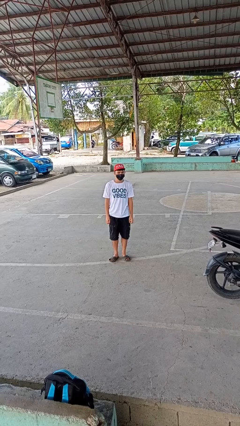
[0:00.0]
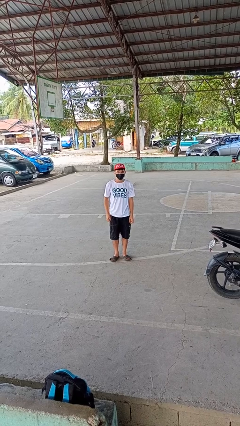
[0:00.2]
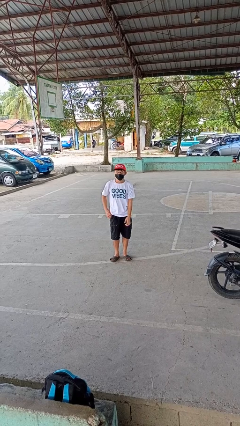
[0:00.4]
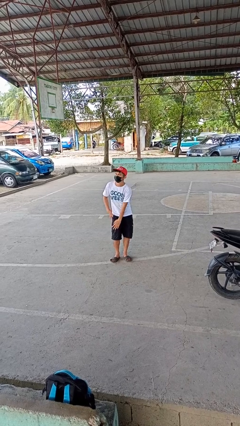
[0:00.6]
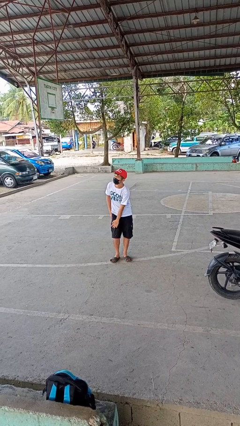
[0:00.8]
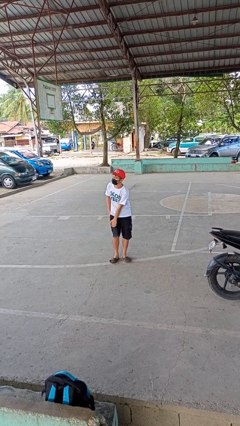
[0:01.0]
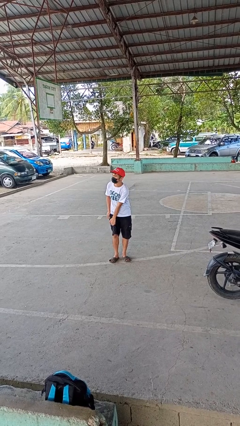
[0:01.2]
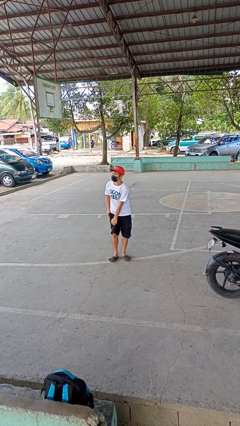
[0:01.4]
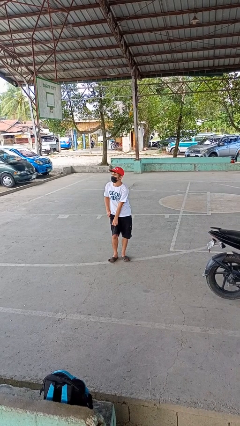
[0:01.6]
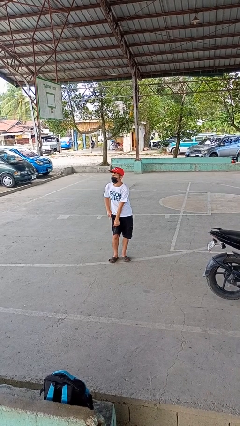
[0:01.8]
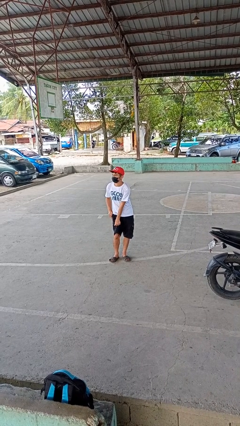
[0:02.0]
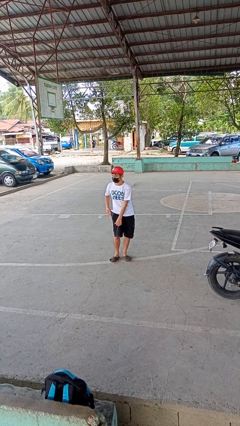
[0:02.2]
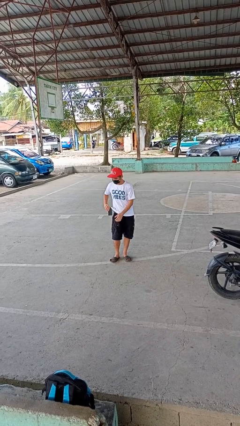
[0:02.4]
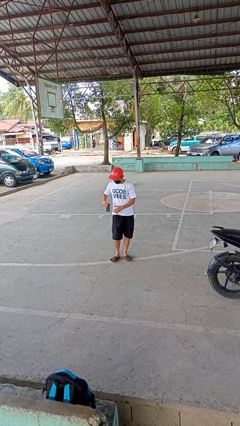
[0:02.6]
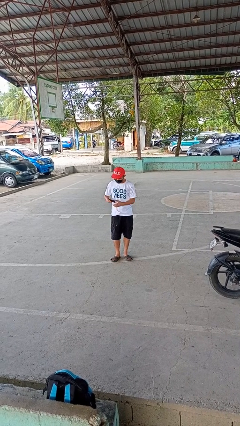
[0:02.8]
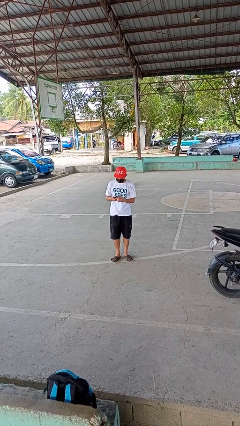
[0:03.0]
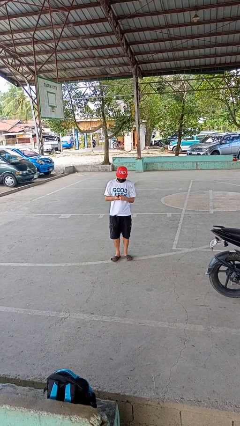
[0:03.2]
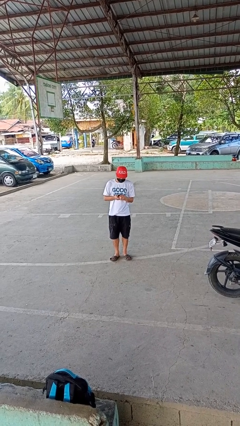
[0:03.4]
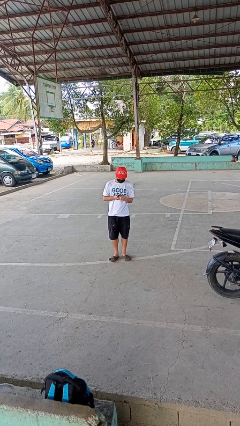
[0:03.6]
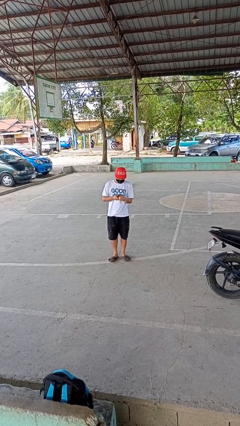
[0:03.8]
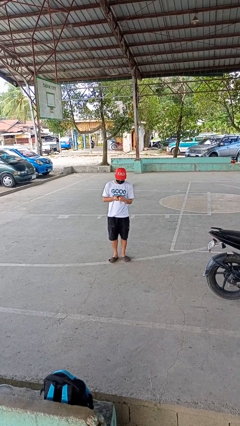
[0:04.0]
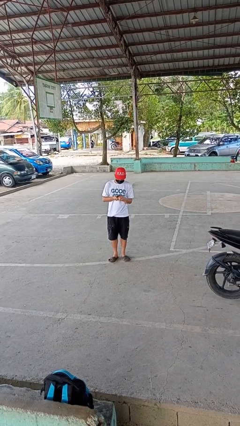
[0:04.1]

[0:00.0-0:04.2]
person takes phone from pocket

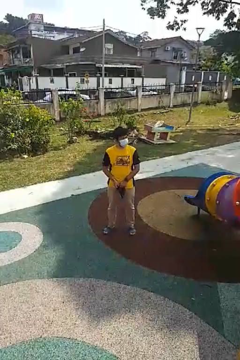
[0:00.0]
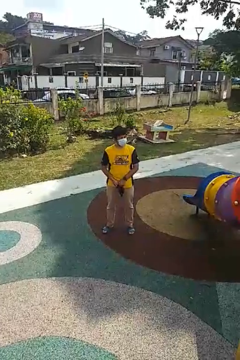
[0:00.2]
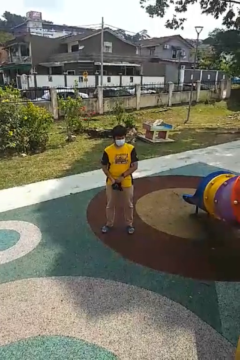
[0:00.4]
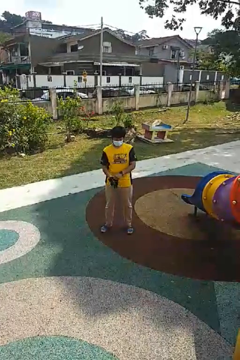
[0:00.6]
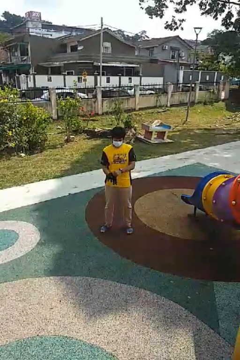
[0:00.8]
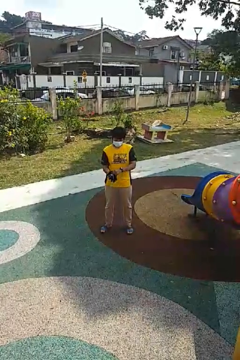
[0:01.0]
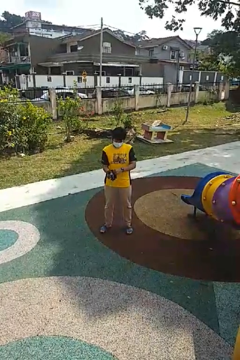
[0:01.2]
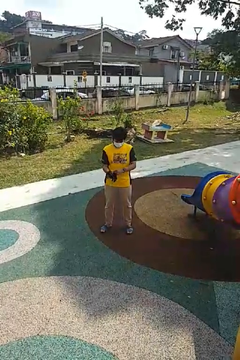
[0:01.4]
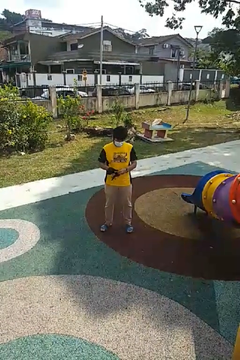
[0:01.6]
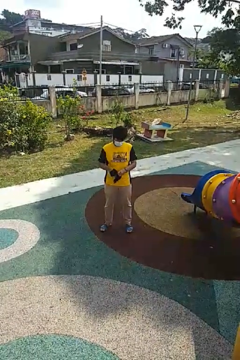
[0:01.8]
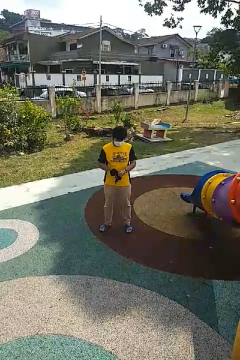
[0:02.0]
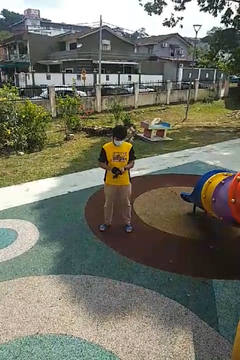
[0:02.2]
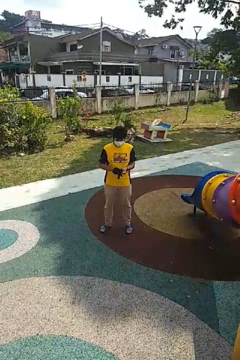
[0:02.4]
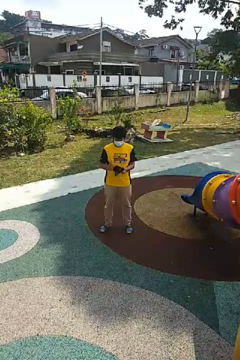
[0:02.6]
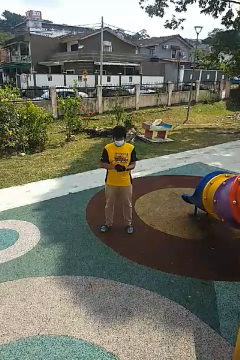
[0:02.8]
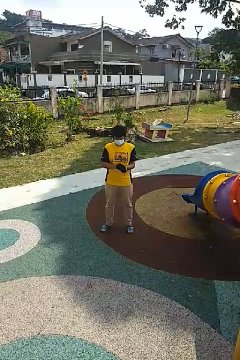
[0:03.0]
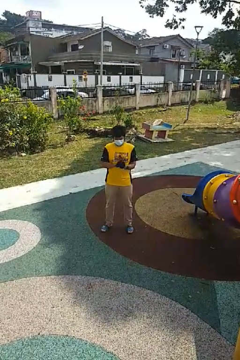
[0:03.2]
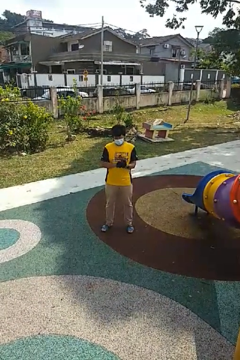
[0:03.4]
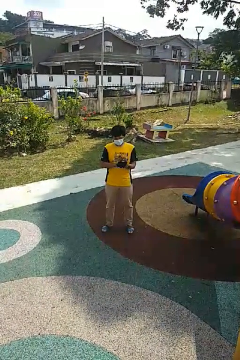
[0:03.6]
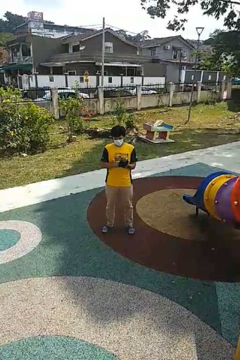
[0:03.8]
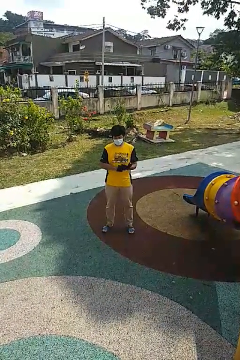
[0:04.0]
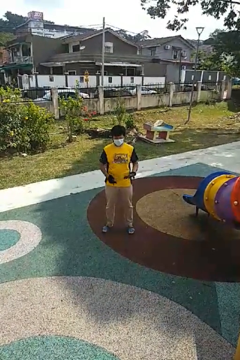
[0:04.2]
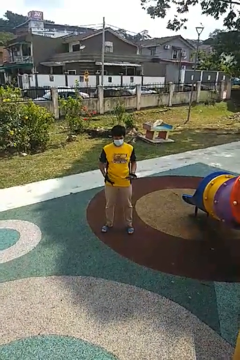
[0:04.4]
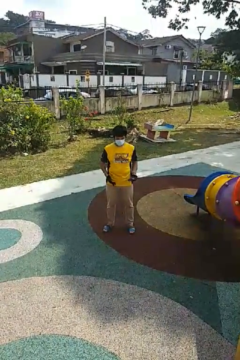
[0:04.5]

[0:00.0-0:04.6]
person puts on gloves

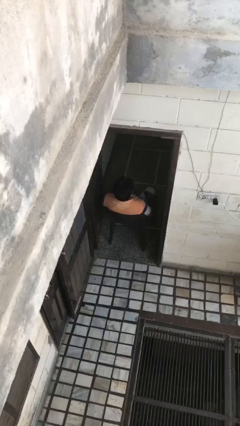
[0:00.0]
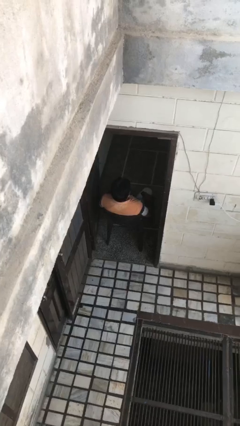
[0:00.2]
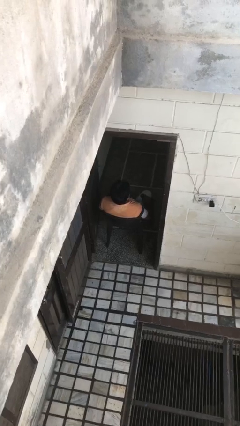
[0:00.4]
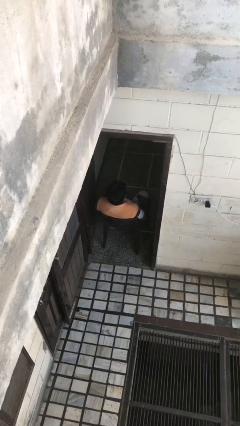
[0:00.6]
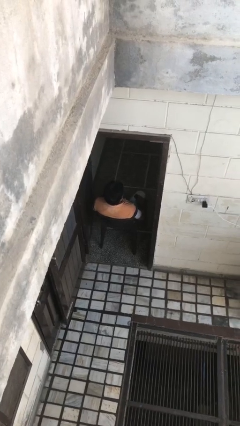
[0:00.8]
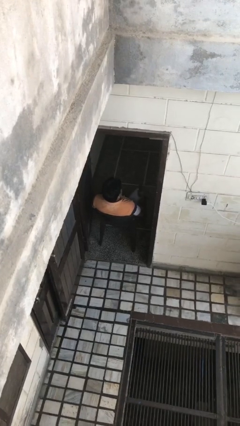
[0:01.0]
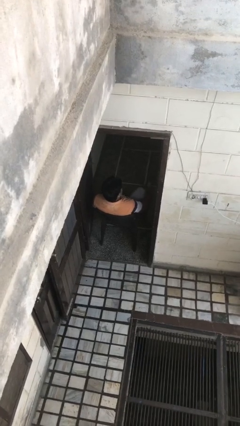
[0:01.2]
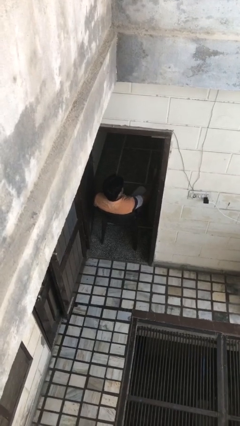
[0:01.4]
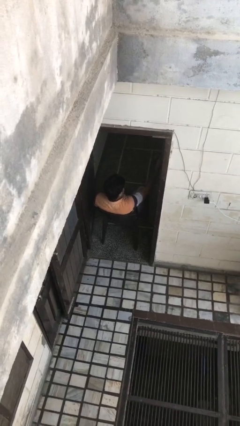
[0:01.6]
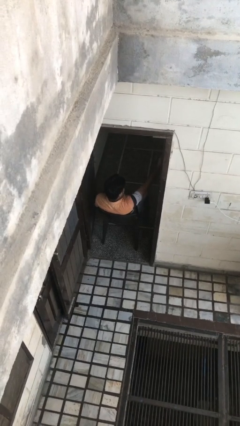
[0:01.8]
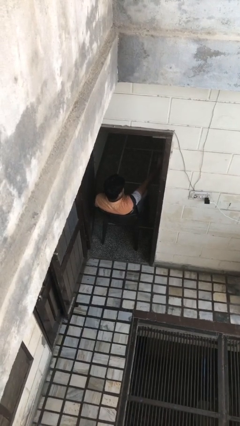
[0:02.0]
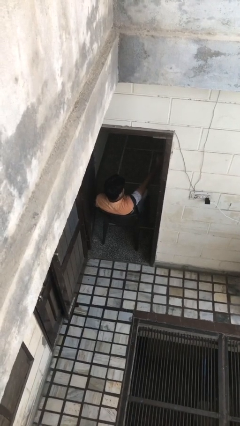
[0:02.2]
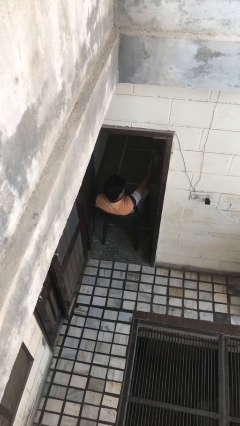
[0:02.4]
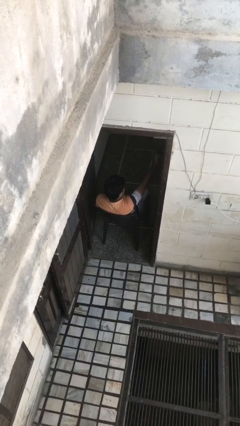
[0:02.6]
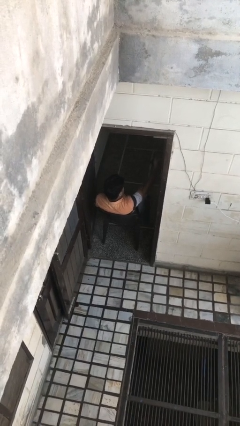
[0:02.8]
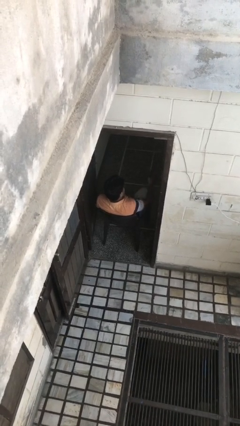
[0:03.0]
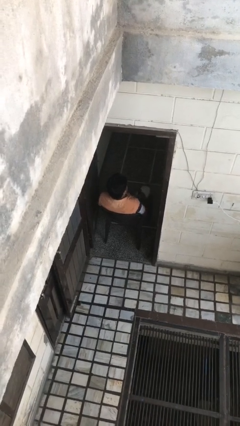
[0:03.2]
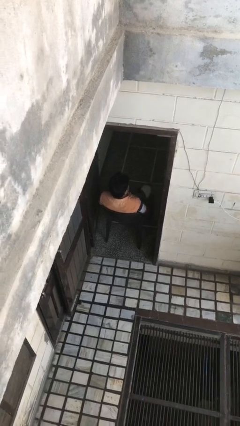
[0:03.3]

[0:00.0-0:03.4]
person uses television remote

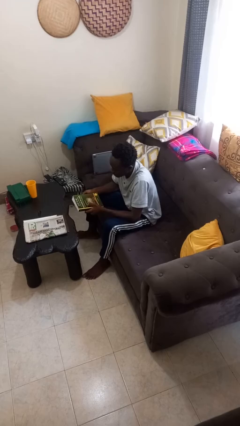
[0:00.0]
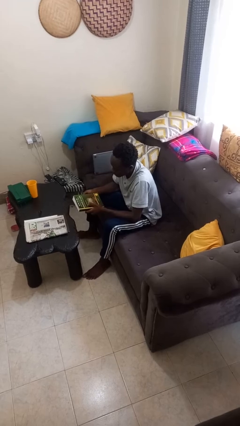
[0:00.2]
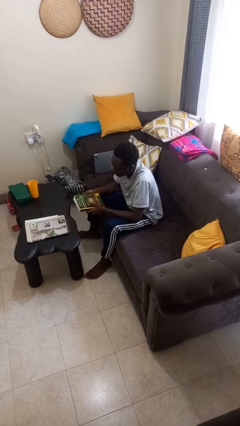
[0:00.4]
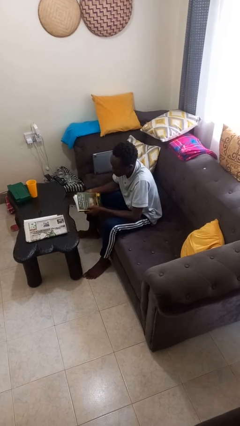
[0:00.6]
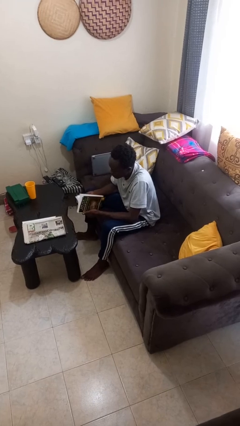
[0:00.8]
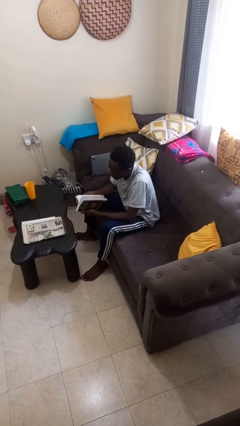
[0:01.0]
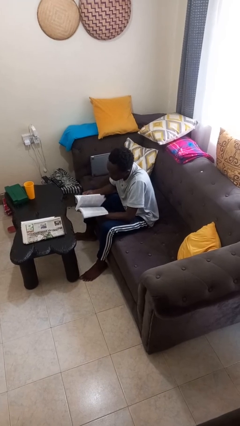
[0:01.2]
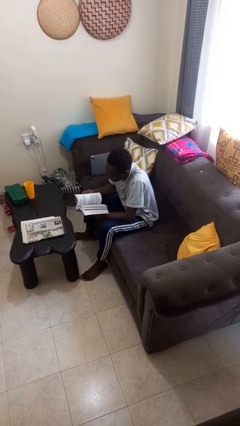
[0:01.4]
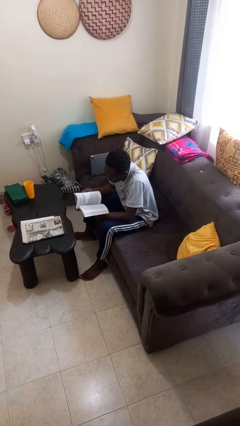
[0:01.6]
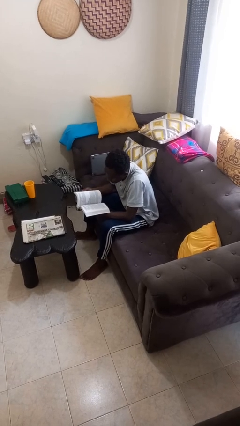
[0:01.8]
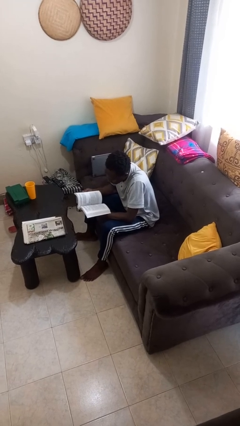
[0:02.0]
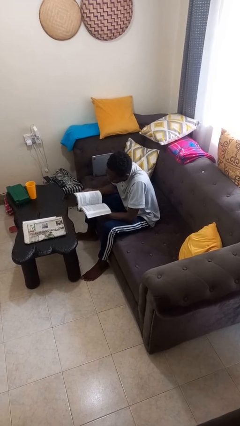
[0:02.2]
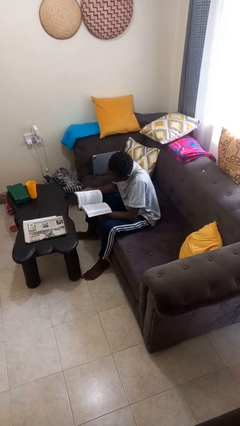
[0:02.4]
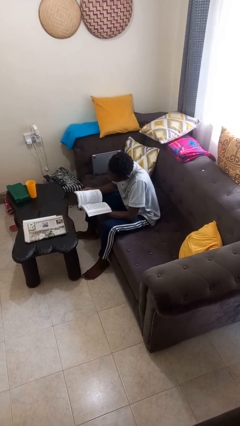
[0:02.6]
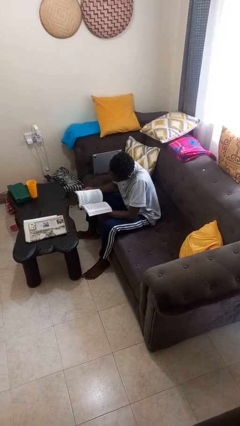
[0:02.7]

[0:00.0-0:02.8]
person reads book

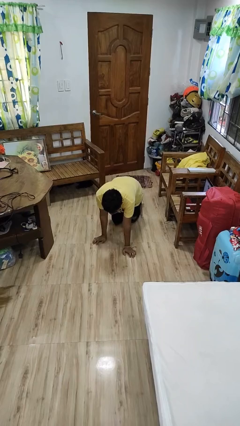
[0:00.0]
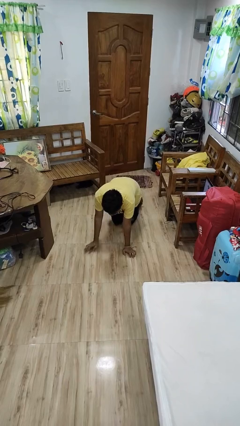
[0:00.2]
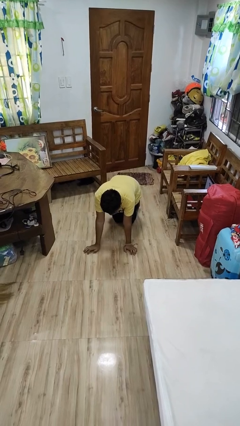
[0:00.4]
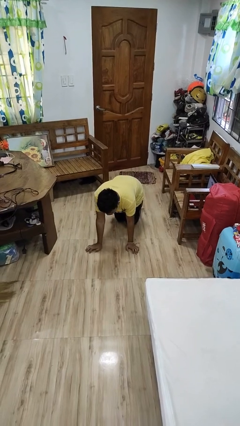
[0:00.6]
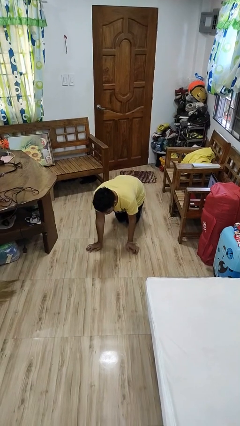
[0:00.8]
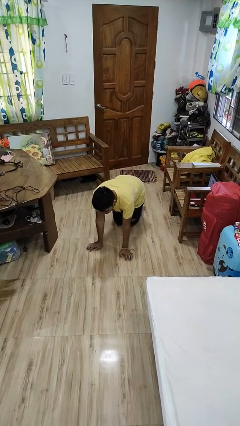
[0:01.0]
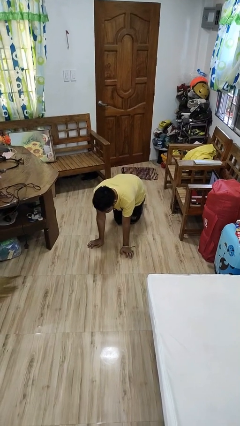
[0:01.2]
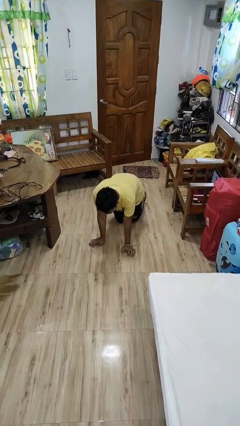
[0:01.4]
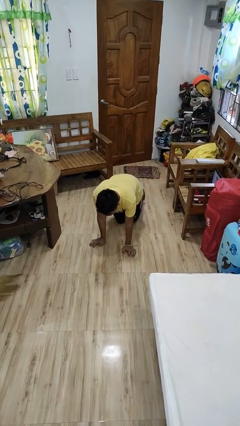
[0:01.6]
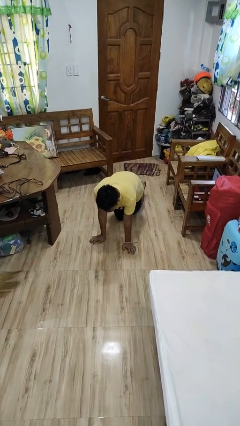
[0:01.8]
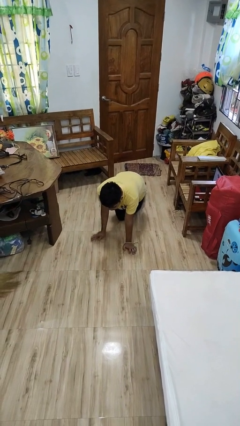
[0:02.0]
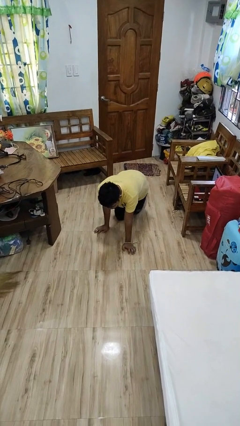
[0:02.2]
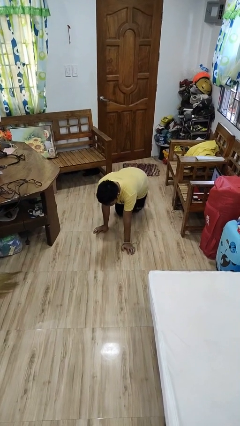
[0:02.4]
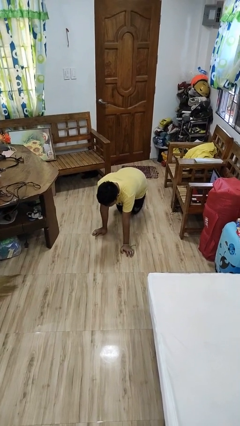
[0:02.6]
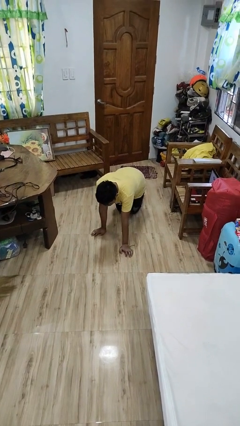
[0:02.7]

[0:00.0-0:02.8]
person crawls

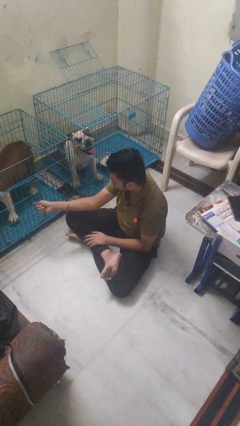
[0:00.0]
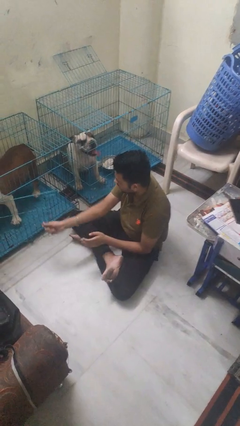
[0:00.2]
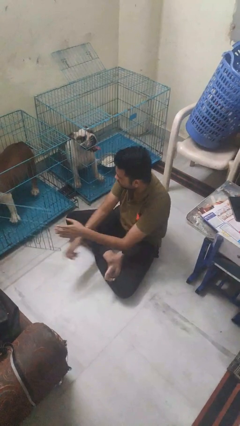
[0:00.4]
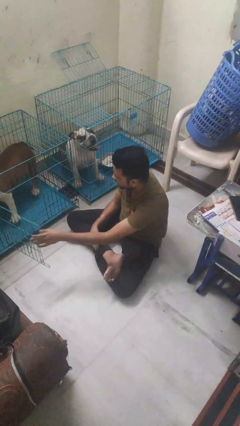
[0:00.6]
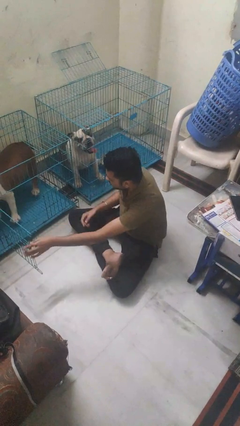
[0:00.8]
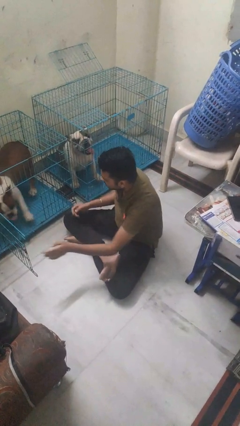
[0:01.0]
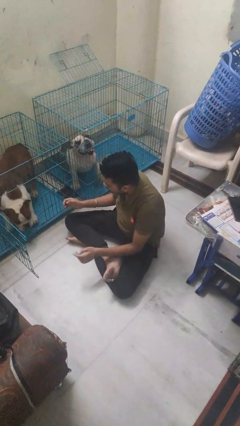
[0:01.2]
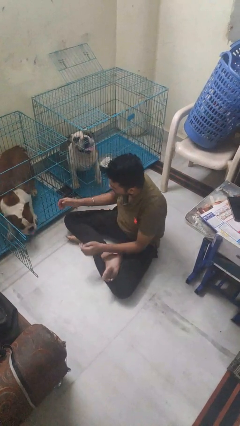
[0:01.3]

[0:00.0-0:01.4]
person uncrates dog
